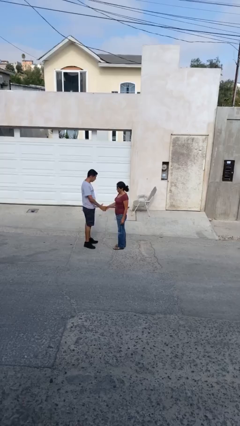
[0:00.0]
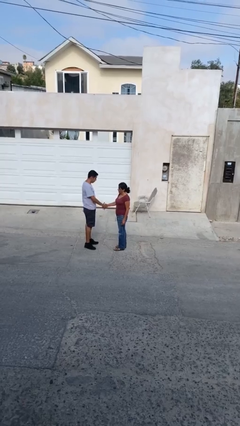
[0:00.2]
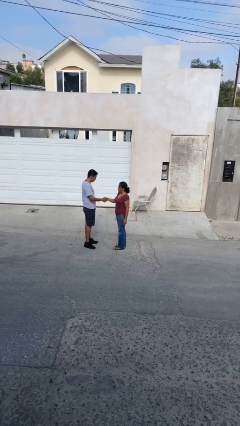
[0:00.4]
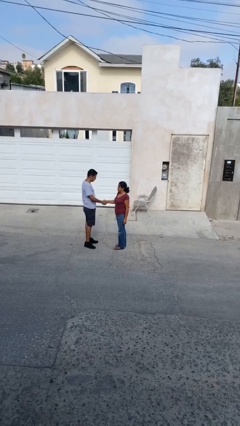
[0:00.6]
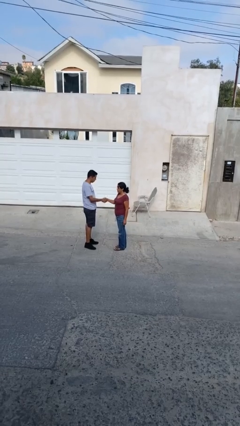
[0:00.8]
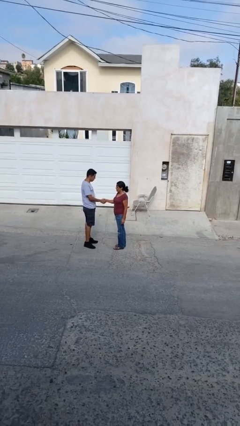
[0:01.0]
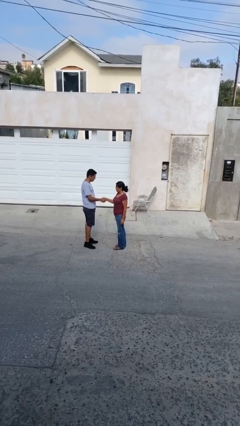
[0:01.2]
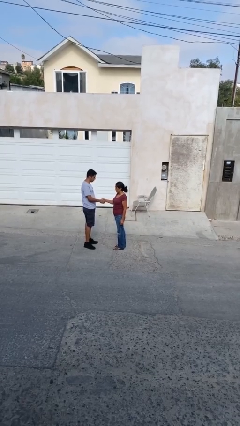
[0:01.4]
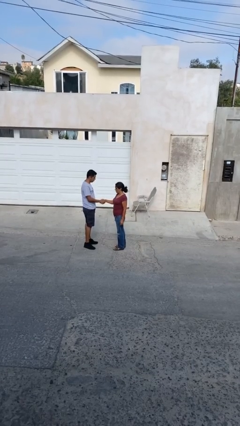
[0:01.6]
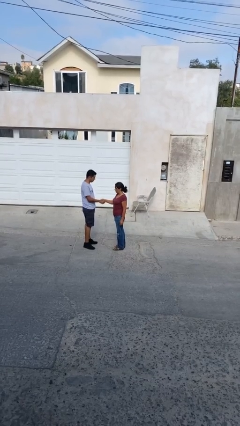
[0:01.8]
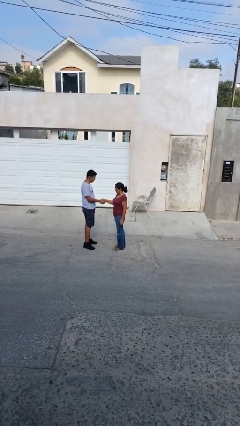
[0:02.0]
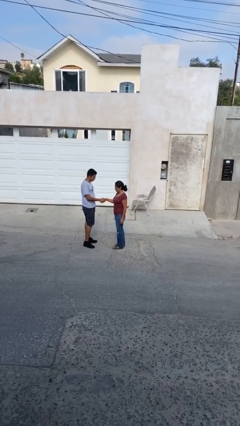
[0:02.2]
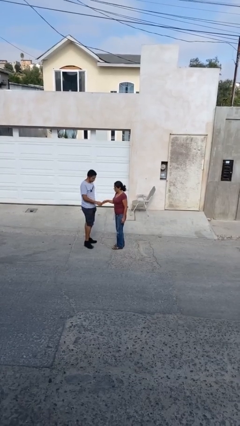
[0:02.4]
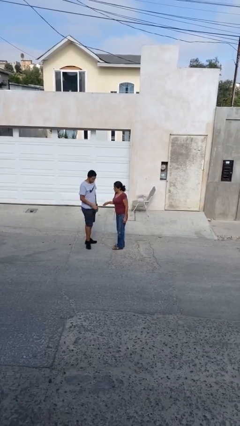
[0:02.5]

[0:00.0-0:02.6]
person shakes hand

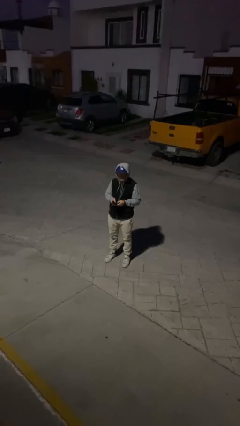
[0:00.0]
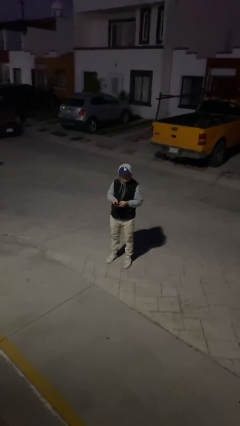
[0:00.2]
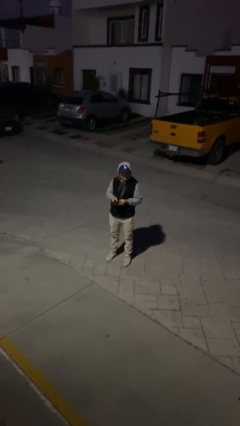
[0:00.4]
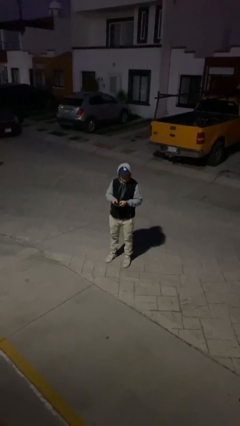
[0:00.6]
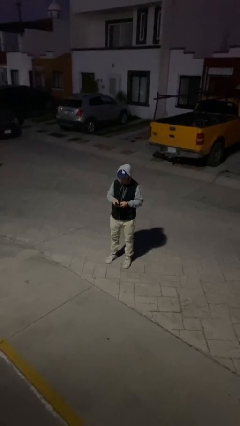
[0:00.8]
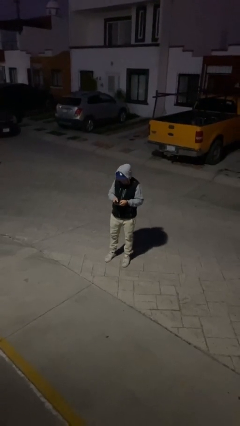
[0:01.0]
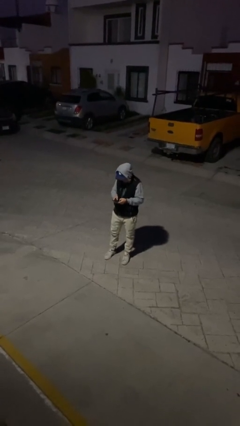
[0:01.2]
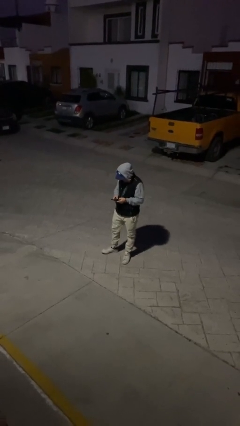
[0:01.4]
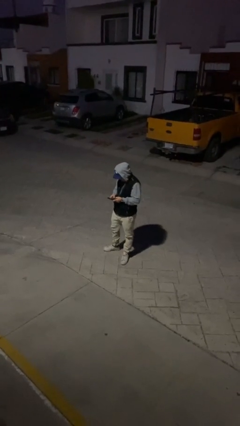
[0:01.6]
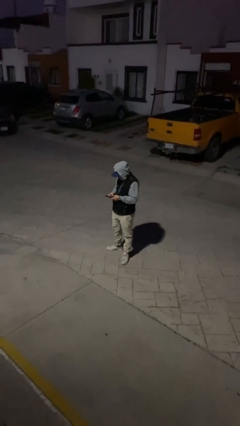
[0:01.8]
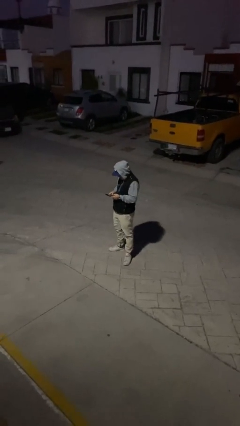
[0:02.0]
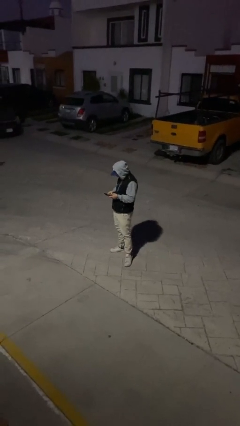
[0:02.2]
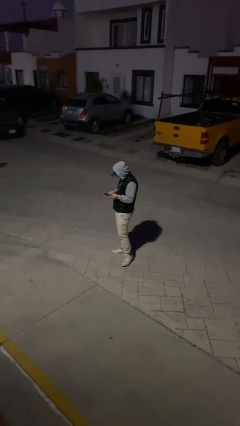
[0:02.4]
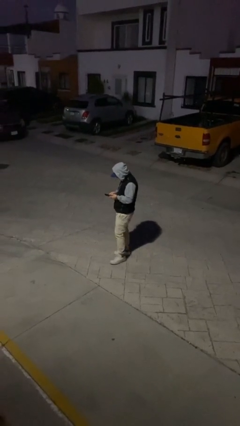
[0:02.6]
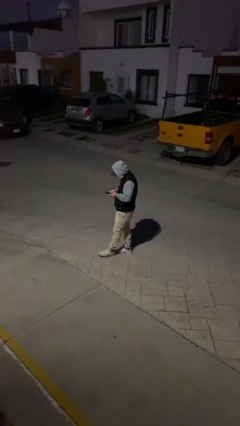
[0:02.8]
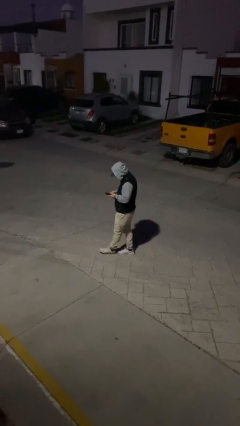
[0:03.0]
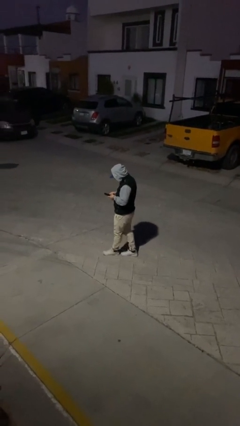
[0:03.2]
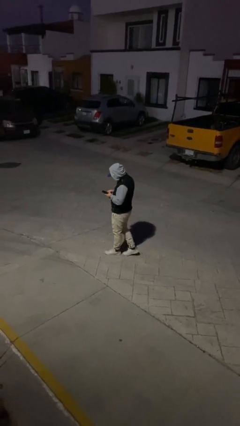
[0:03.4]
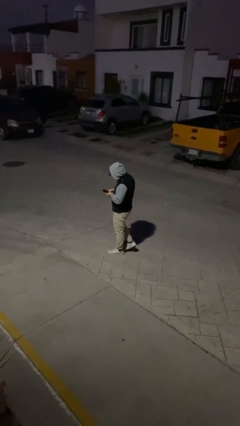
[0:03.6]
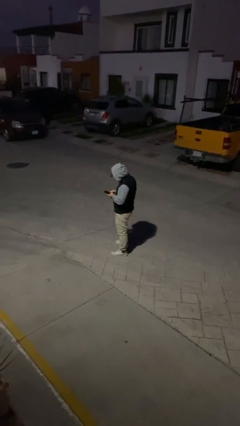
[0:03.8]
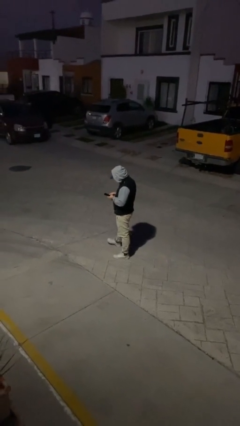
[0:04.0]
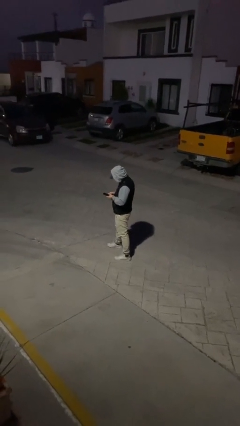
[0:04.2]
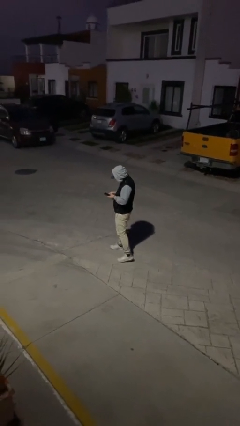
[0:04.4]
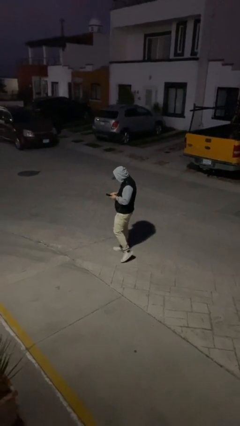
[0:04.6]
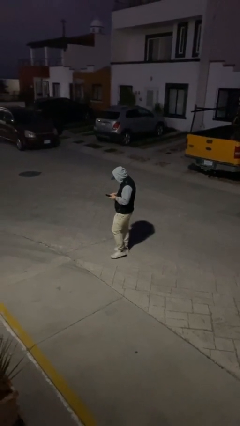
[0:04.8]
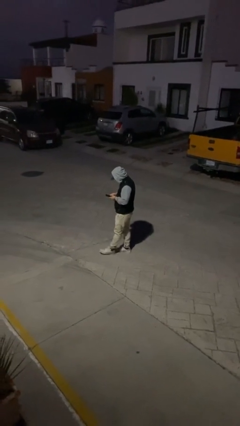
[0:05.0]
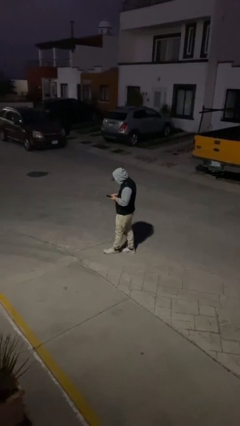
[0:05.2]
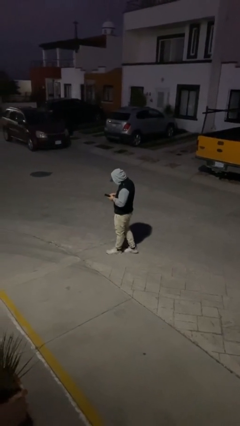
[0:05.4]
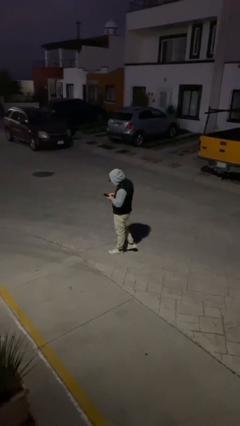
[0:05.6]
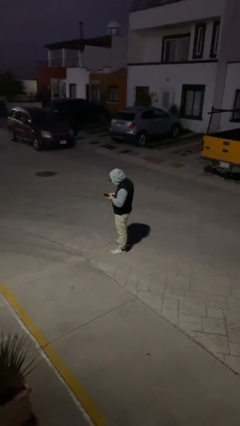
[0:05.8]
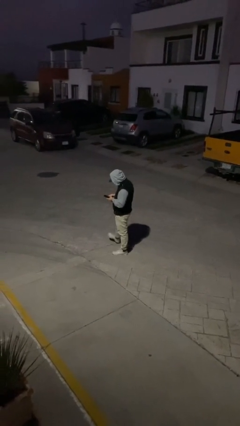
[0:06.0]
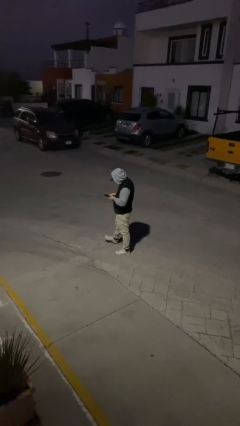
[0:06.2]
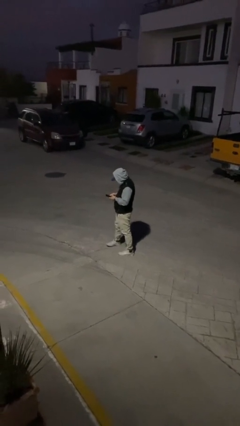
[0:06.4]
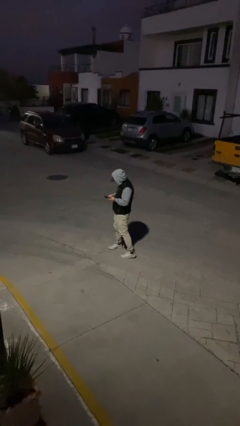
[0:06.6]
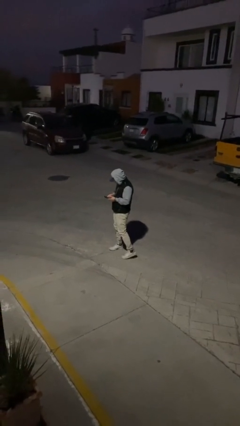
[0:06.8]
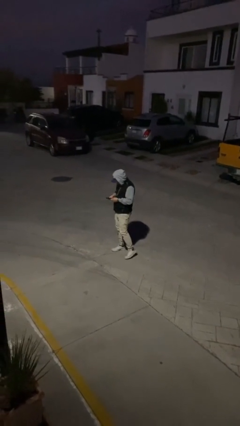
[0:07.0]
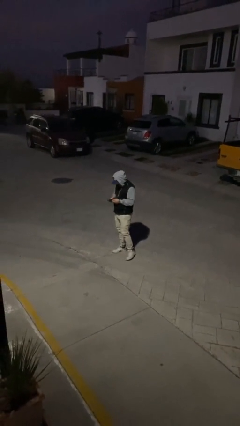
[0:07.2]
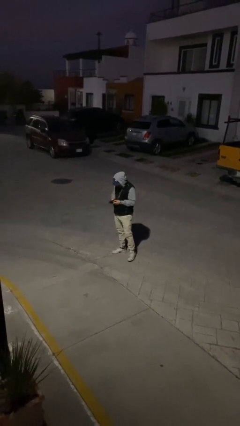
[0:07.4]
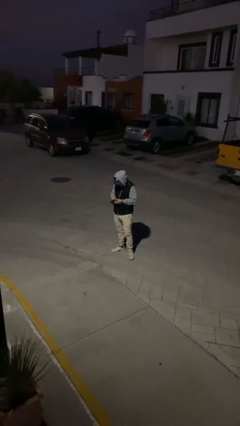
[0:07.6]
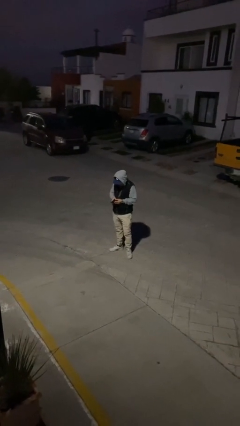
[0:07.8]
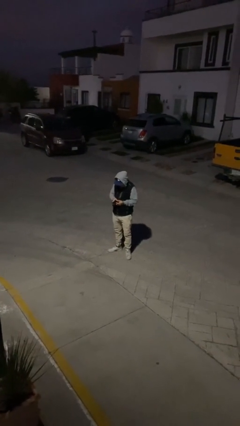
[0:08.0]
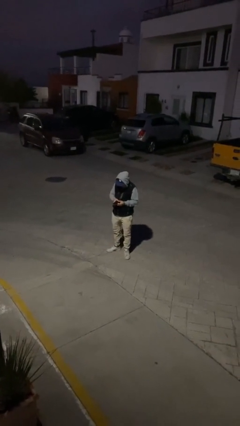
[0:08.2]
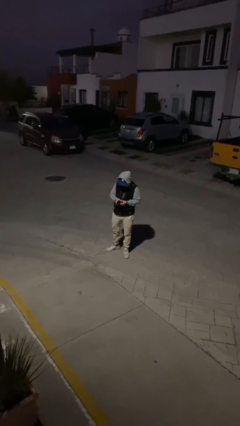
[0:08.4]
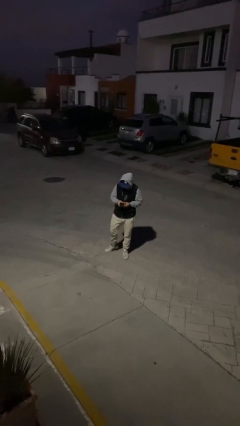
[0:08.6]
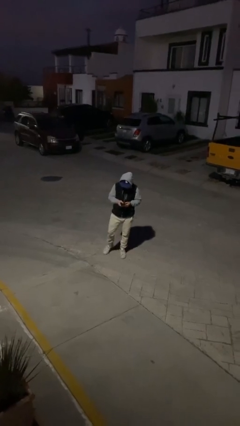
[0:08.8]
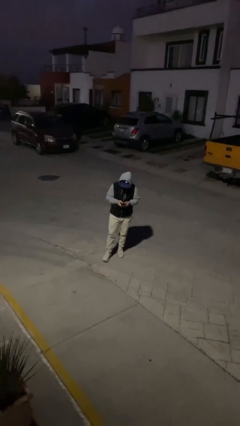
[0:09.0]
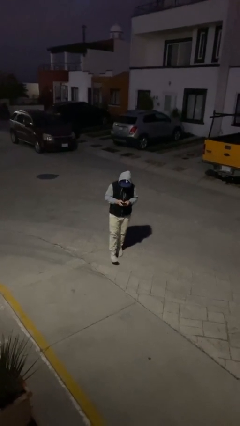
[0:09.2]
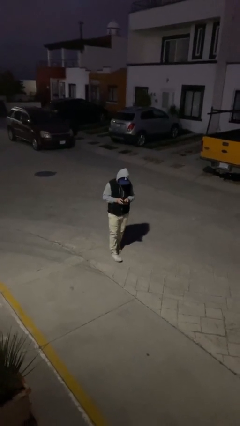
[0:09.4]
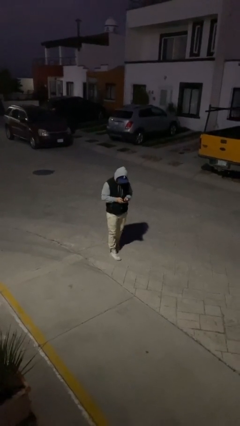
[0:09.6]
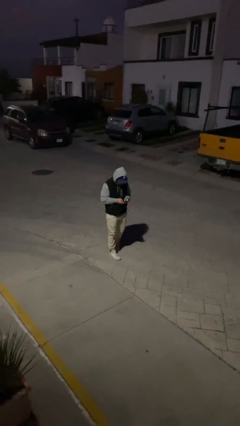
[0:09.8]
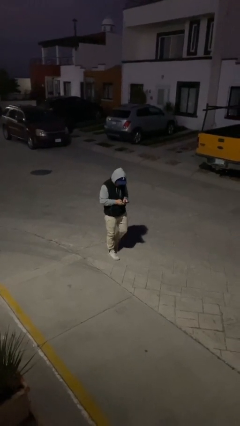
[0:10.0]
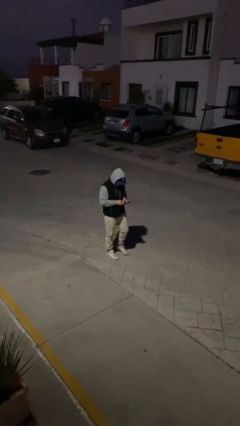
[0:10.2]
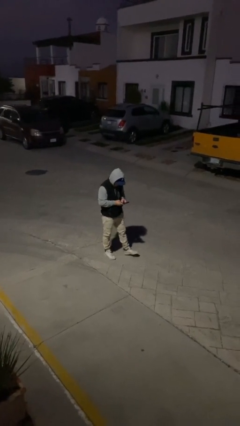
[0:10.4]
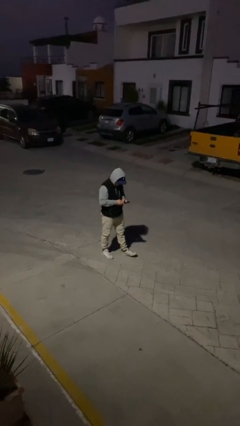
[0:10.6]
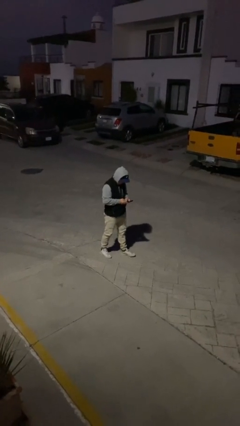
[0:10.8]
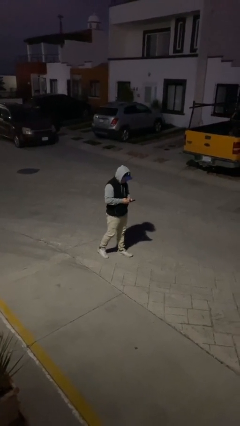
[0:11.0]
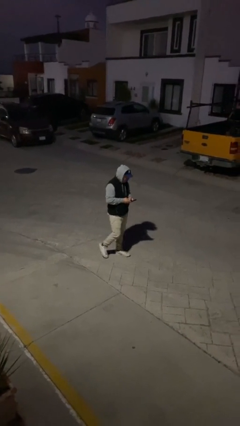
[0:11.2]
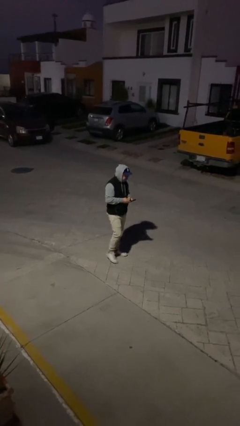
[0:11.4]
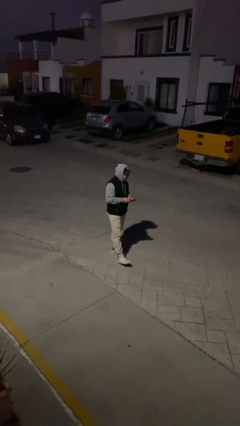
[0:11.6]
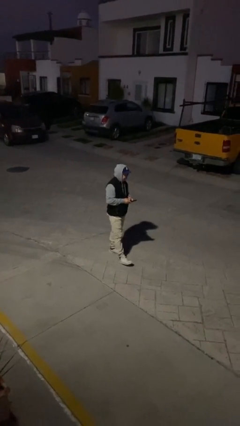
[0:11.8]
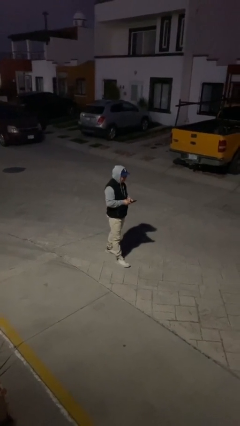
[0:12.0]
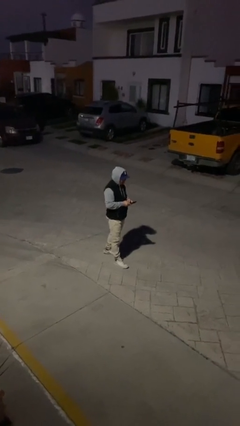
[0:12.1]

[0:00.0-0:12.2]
person texts on phone

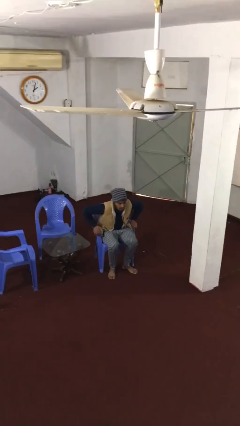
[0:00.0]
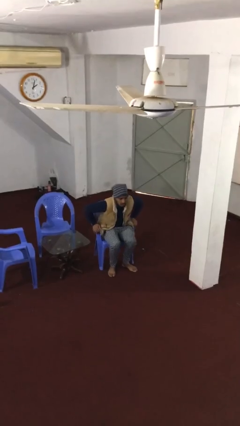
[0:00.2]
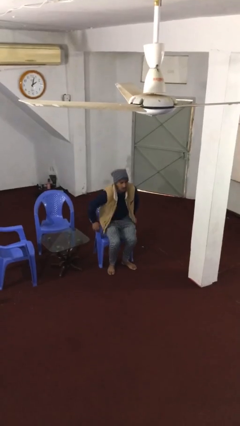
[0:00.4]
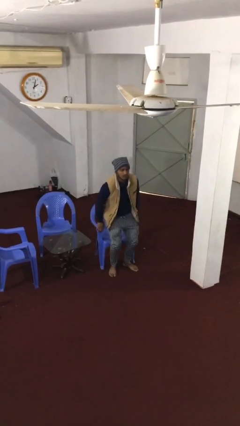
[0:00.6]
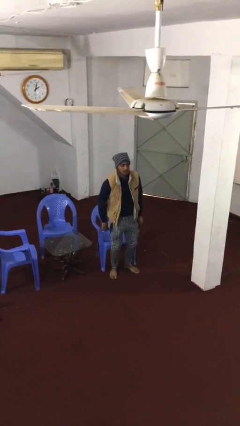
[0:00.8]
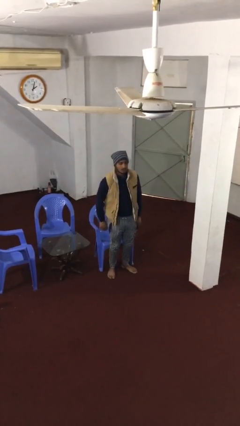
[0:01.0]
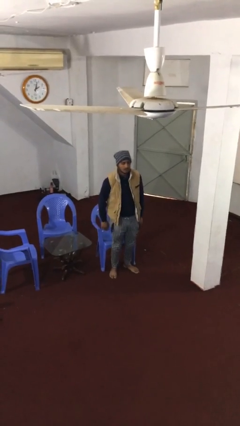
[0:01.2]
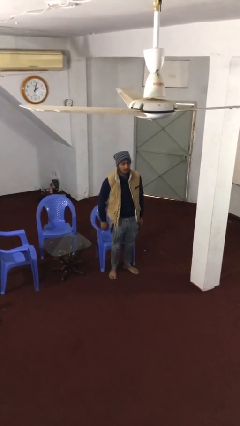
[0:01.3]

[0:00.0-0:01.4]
person stands up

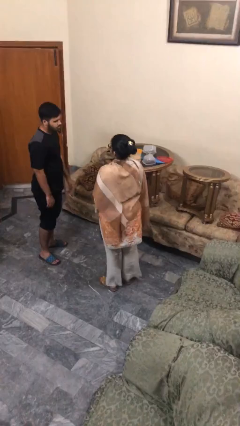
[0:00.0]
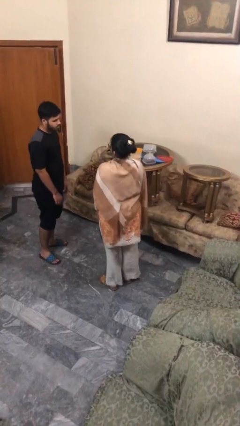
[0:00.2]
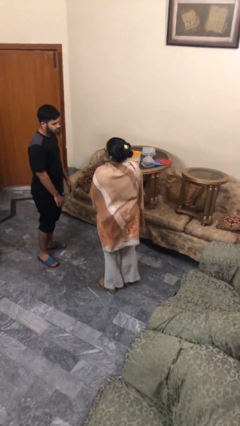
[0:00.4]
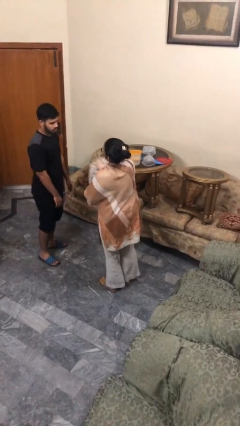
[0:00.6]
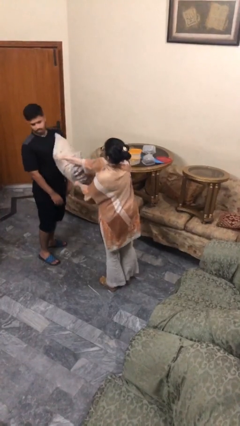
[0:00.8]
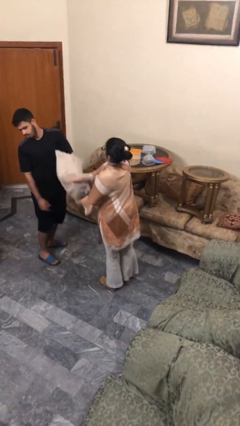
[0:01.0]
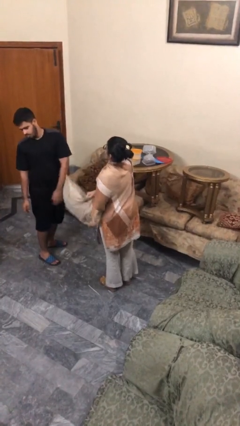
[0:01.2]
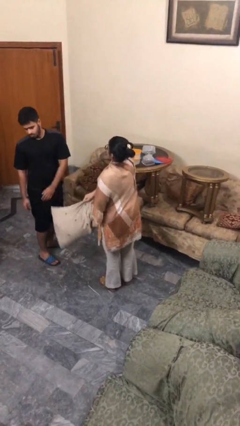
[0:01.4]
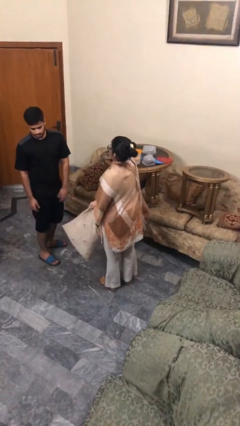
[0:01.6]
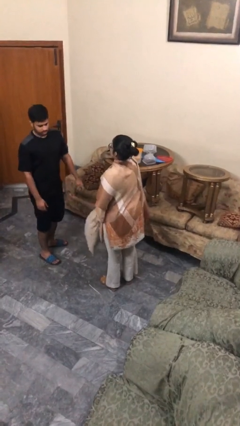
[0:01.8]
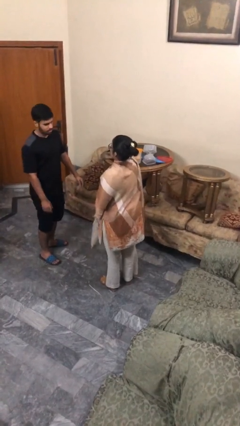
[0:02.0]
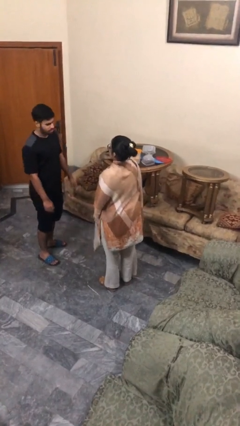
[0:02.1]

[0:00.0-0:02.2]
person hits person with pillow
